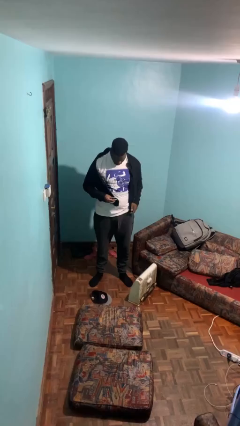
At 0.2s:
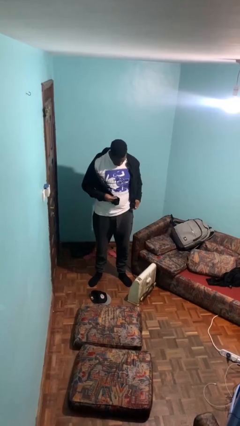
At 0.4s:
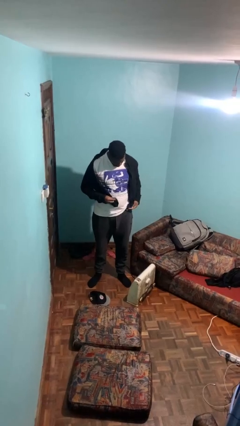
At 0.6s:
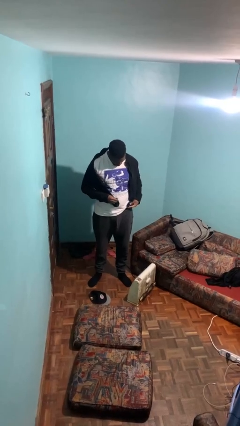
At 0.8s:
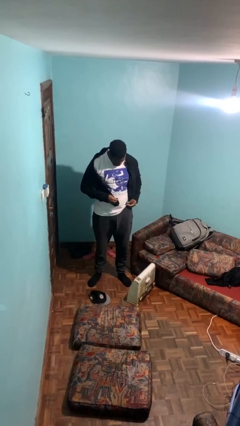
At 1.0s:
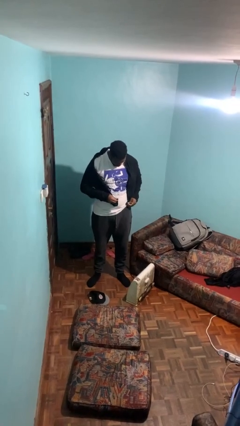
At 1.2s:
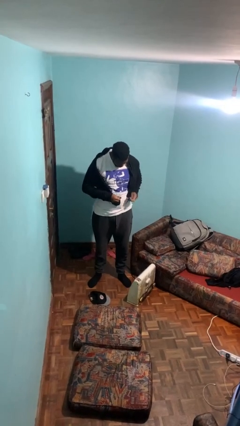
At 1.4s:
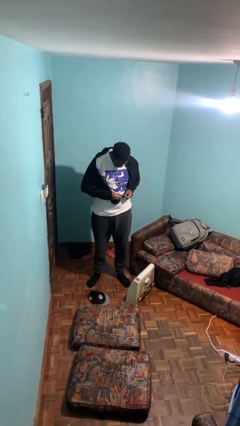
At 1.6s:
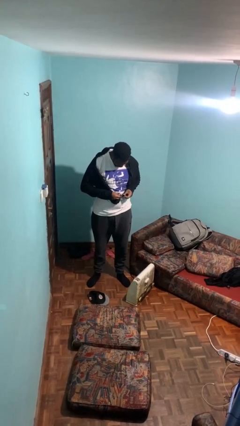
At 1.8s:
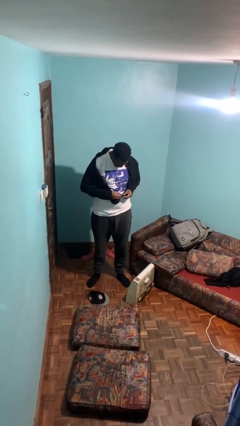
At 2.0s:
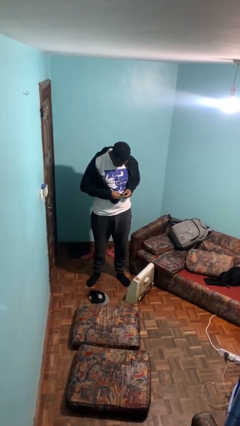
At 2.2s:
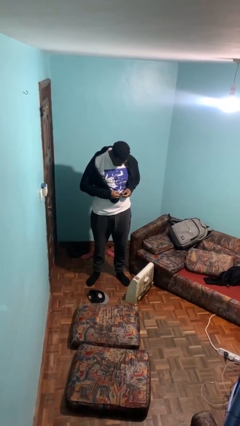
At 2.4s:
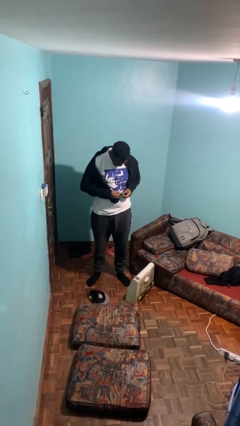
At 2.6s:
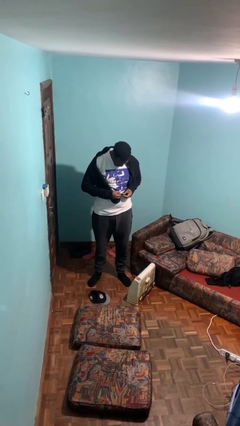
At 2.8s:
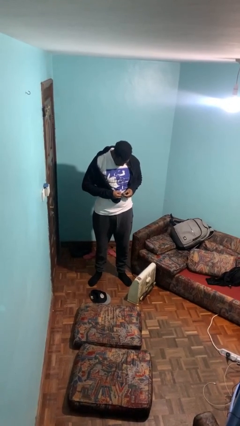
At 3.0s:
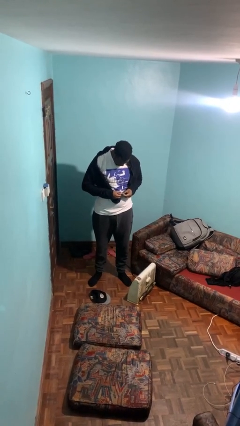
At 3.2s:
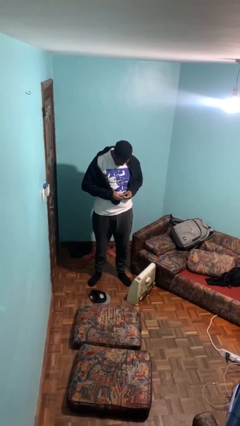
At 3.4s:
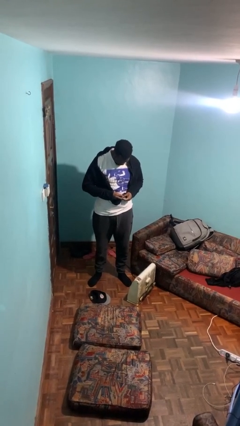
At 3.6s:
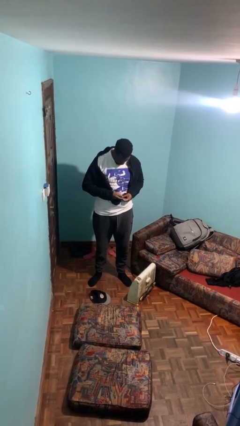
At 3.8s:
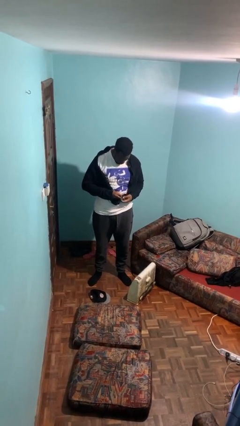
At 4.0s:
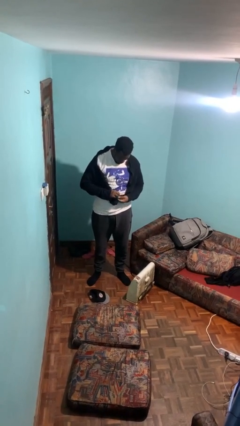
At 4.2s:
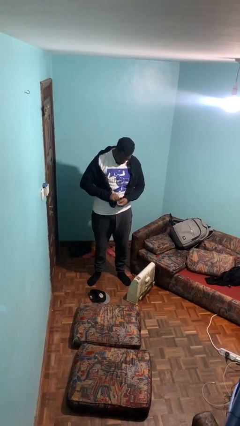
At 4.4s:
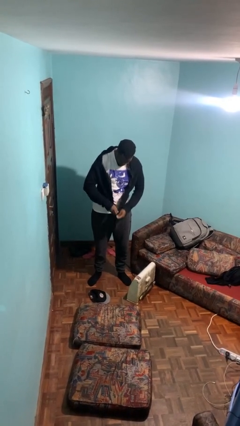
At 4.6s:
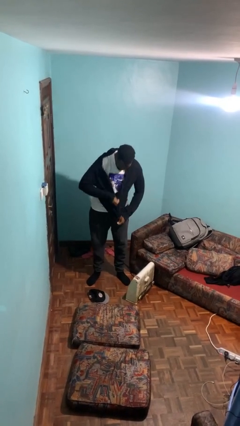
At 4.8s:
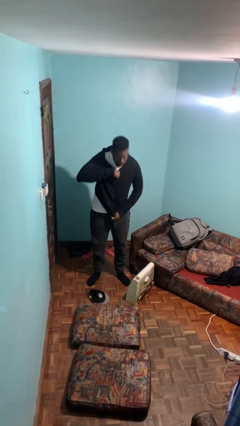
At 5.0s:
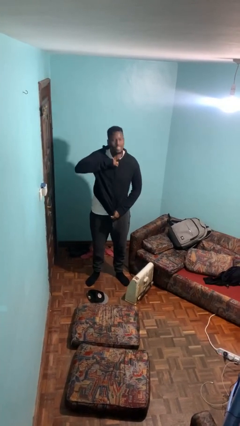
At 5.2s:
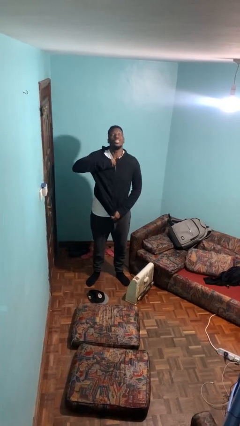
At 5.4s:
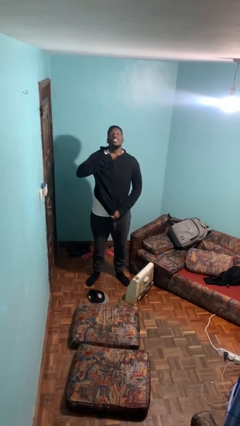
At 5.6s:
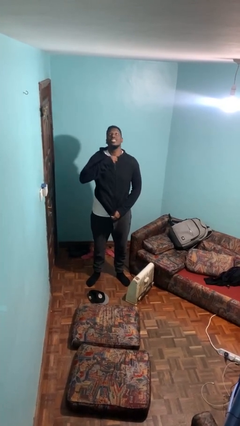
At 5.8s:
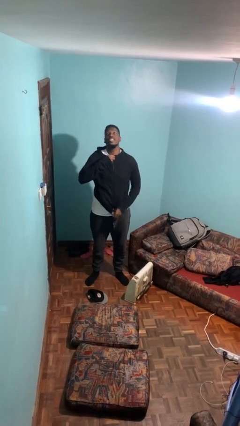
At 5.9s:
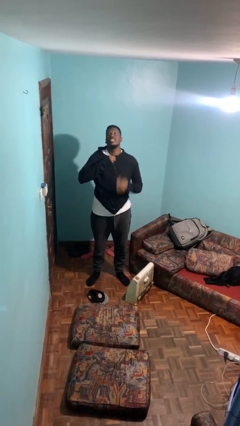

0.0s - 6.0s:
person zips up jacket

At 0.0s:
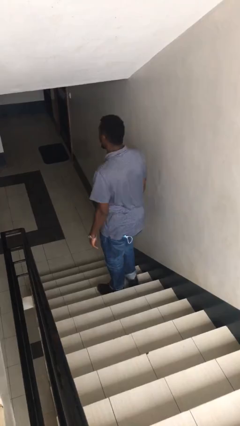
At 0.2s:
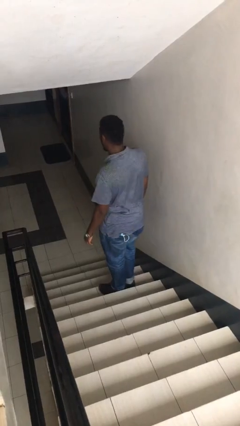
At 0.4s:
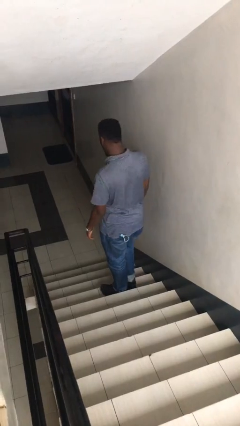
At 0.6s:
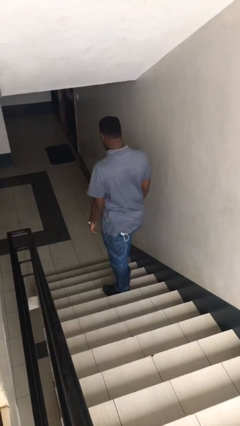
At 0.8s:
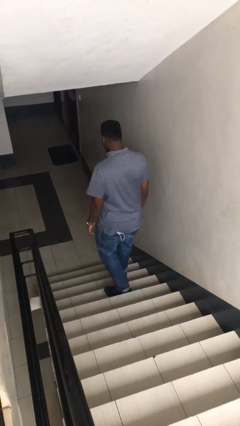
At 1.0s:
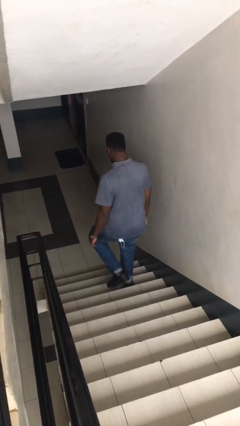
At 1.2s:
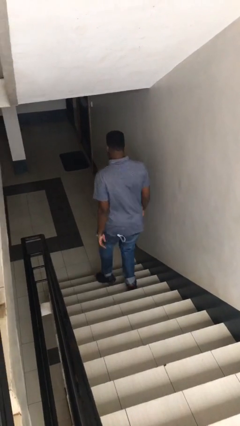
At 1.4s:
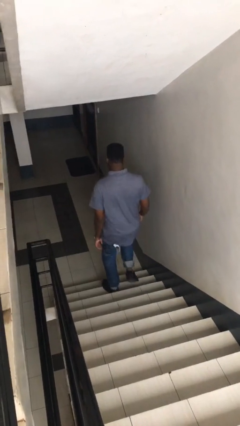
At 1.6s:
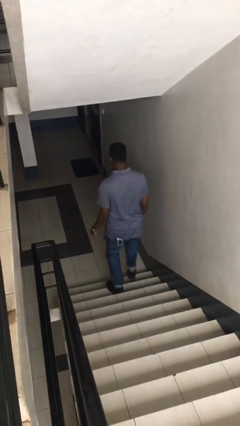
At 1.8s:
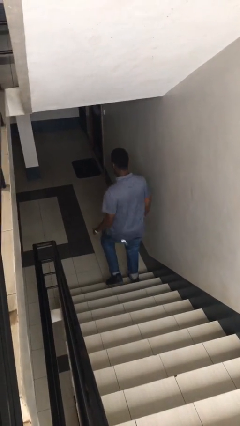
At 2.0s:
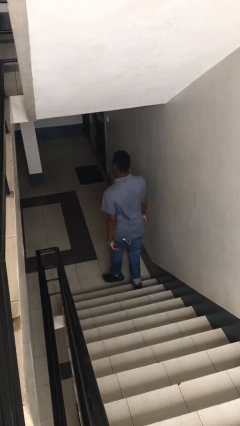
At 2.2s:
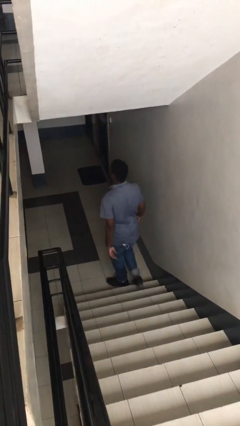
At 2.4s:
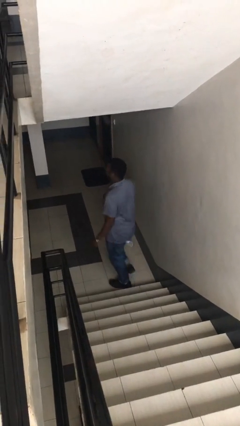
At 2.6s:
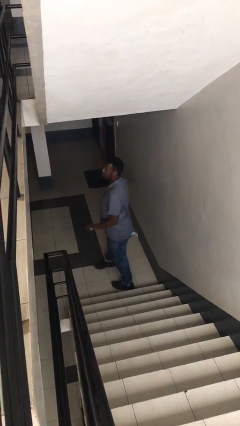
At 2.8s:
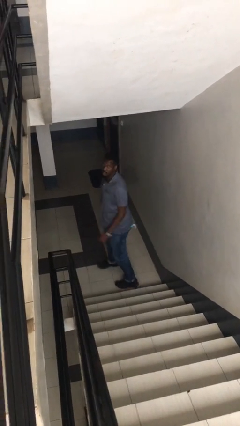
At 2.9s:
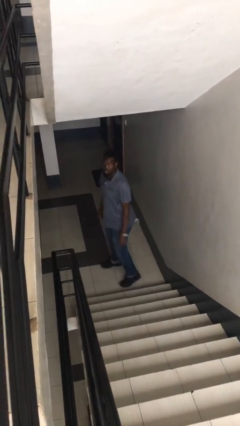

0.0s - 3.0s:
person climbs down stairs

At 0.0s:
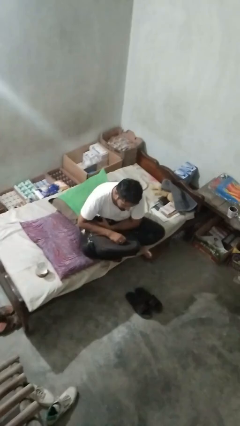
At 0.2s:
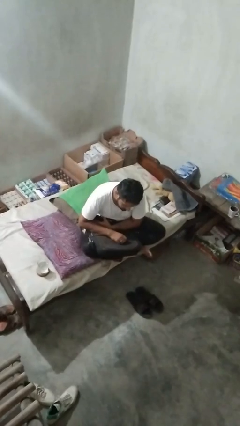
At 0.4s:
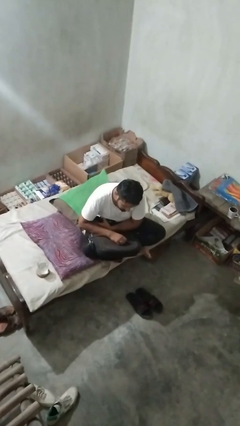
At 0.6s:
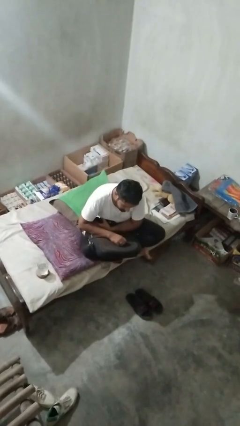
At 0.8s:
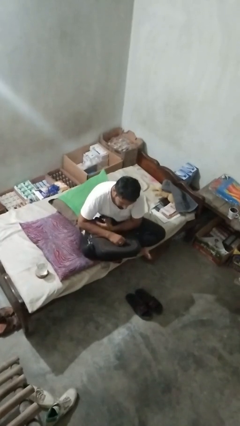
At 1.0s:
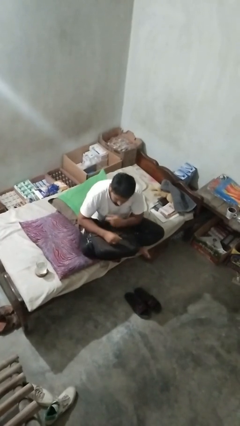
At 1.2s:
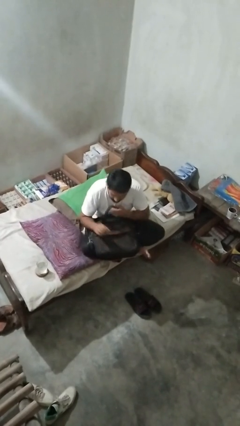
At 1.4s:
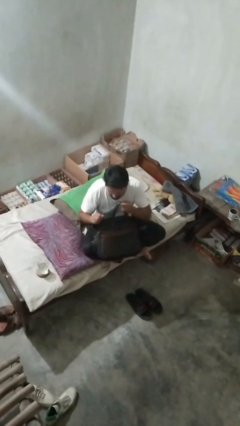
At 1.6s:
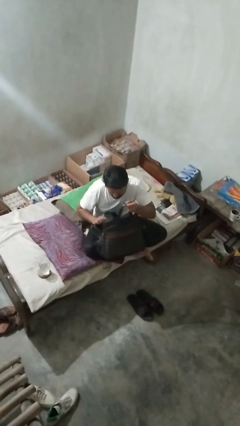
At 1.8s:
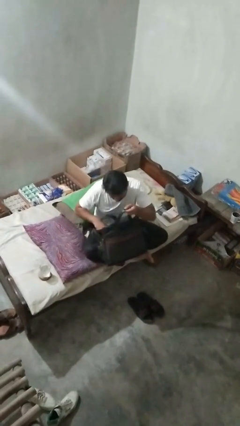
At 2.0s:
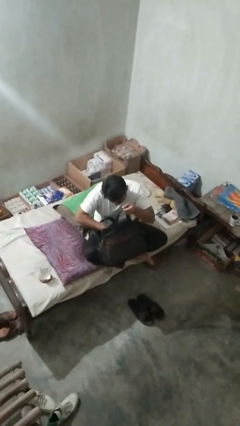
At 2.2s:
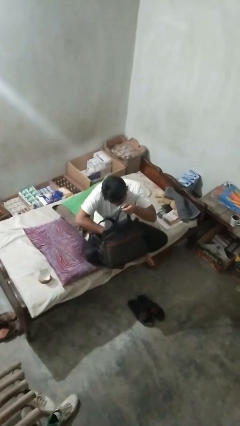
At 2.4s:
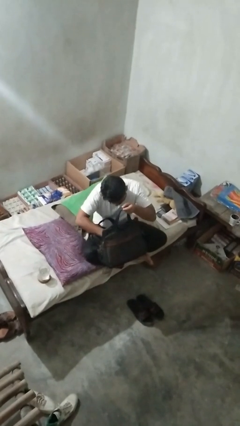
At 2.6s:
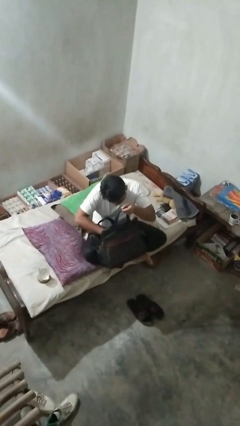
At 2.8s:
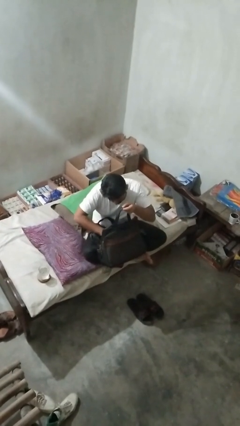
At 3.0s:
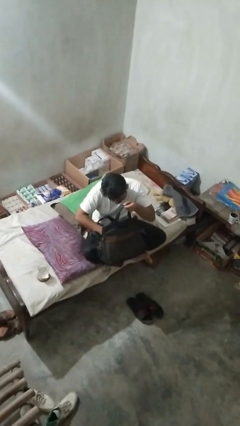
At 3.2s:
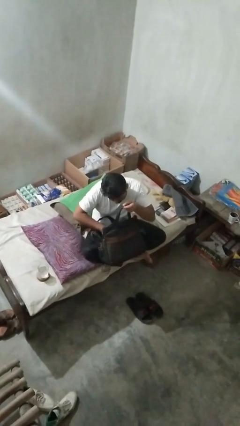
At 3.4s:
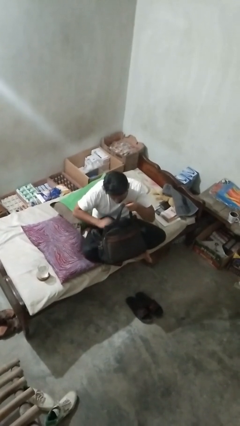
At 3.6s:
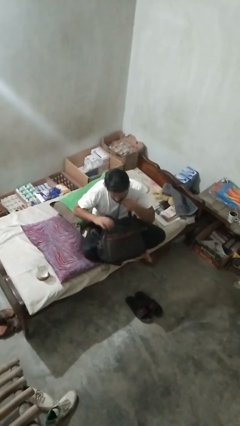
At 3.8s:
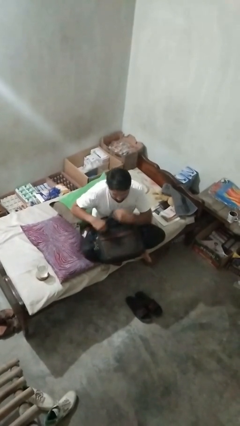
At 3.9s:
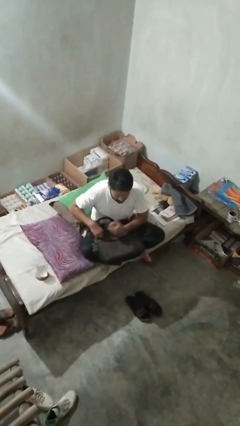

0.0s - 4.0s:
person searches in bag

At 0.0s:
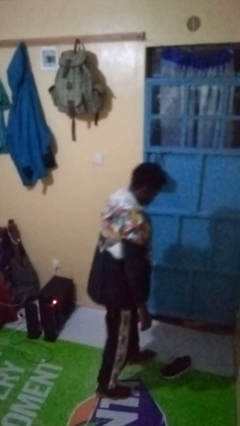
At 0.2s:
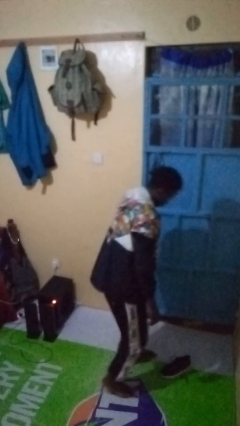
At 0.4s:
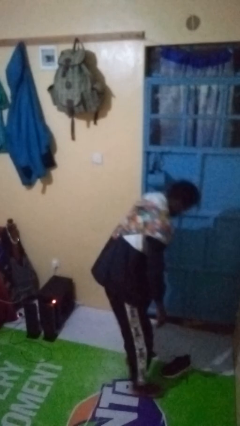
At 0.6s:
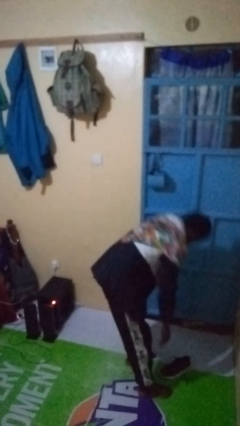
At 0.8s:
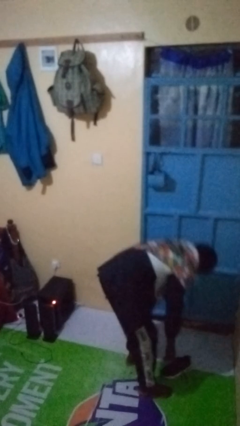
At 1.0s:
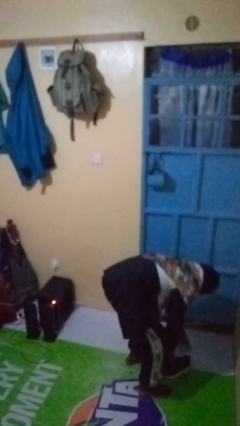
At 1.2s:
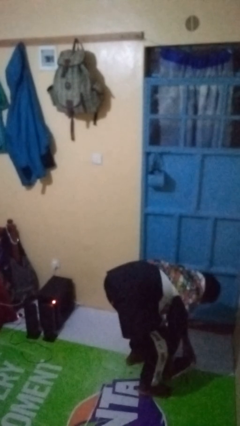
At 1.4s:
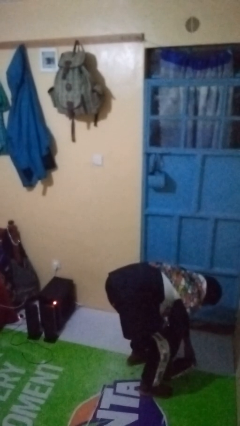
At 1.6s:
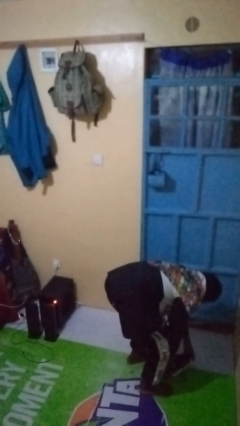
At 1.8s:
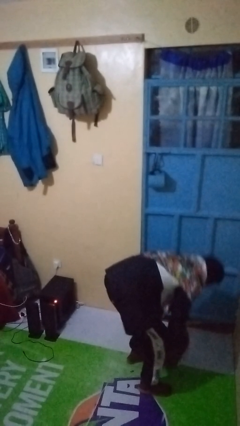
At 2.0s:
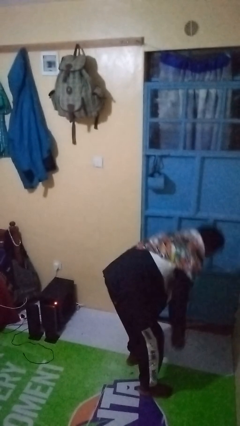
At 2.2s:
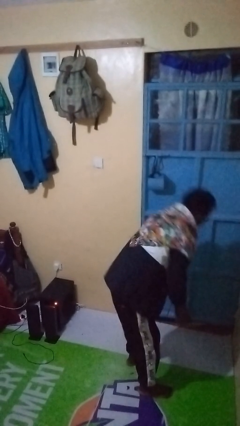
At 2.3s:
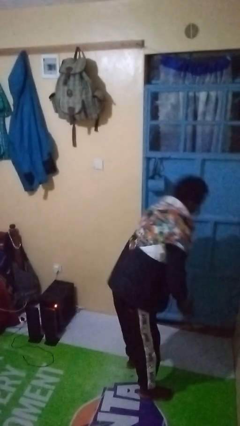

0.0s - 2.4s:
person picks up object from floor

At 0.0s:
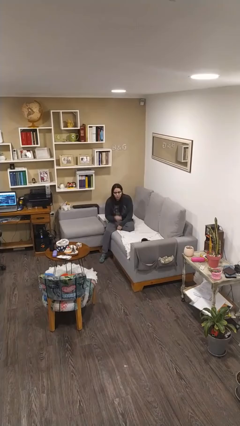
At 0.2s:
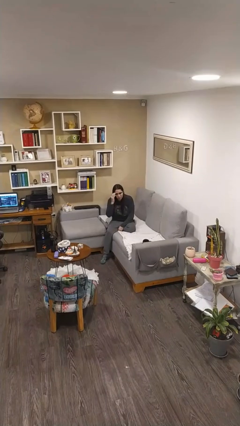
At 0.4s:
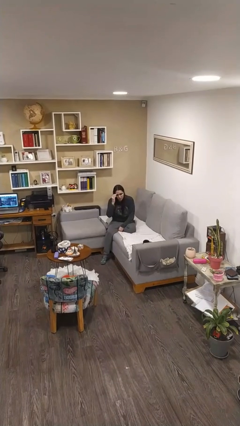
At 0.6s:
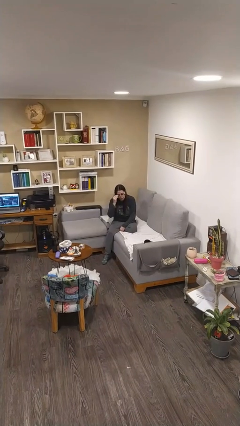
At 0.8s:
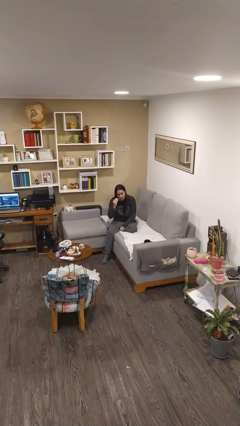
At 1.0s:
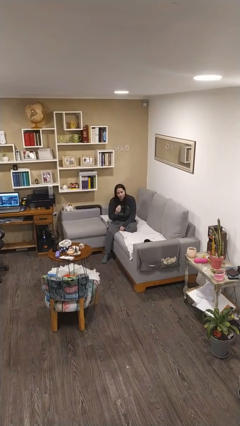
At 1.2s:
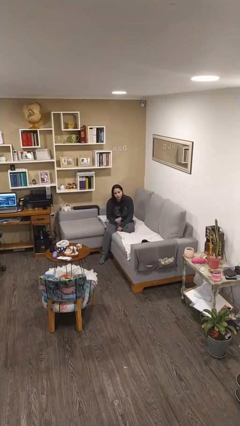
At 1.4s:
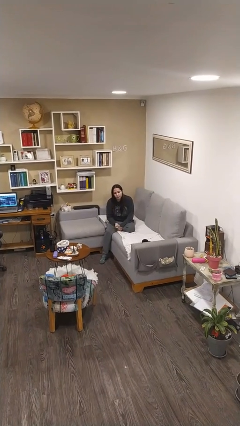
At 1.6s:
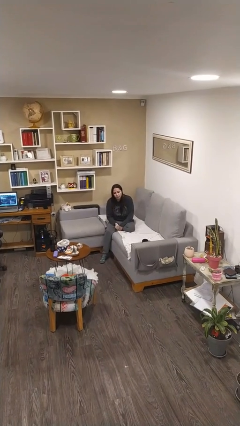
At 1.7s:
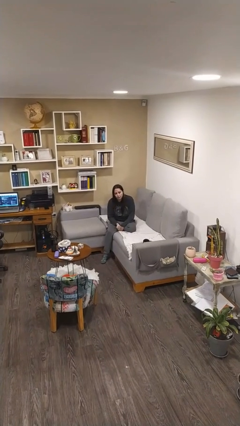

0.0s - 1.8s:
person takes off glasses
